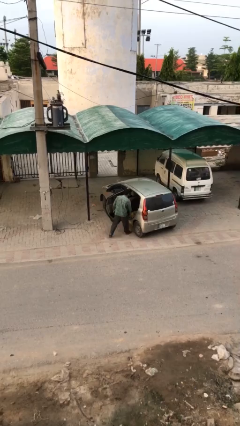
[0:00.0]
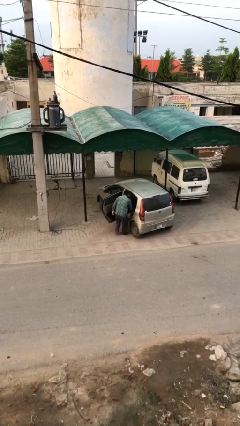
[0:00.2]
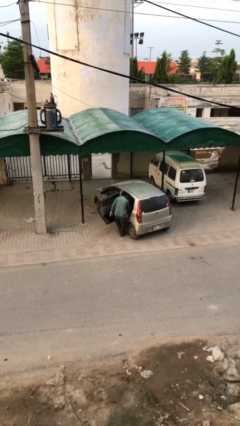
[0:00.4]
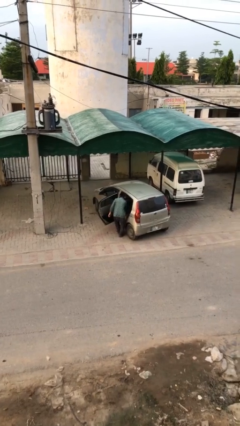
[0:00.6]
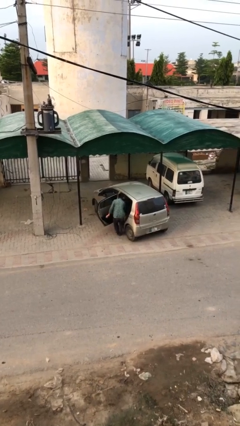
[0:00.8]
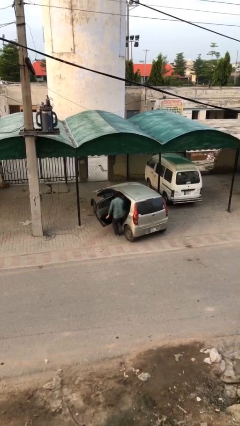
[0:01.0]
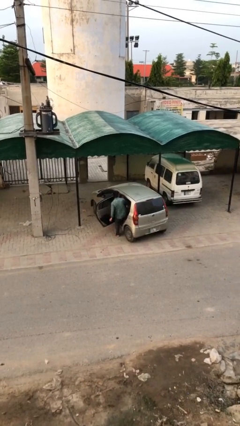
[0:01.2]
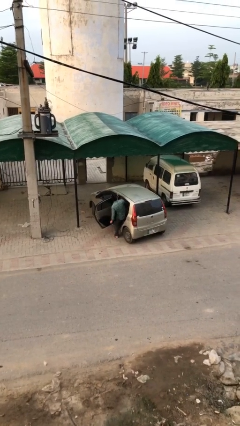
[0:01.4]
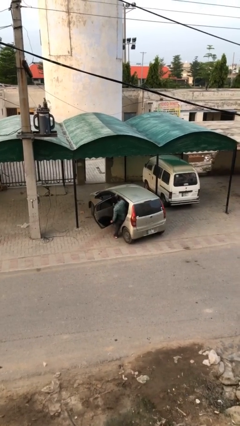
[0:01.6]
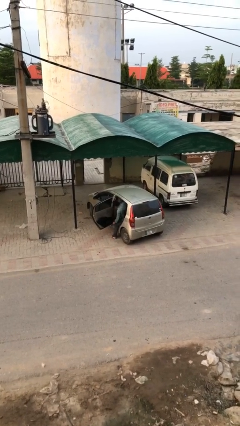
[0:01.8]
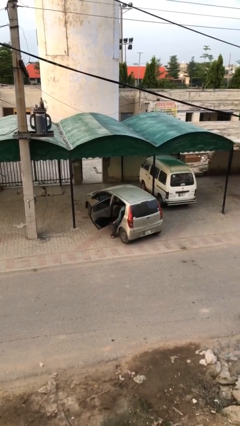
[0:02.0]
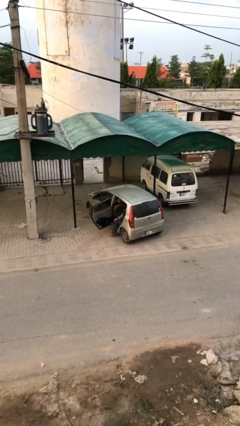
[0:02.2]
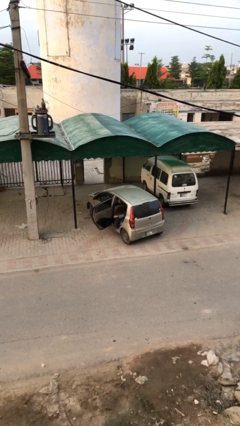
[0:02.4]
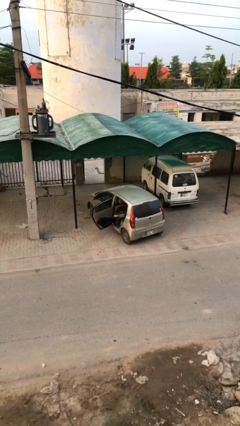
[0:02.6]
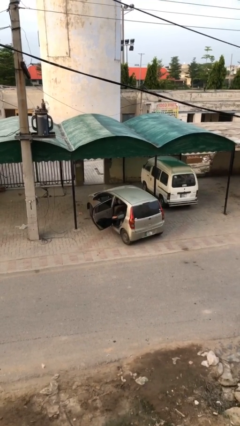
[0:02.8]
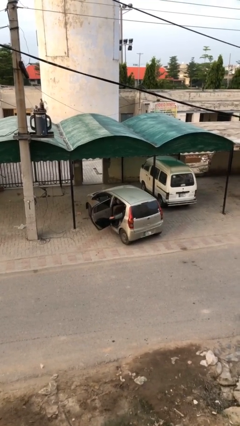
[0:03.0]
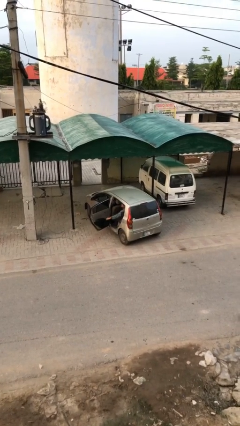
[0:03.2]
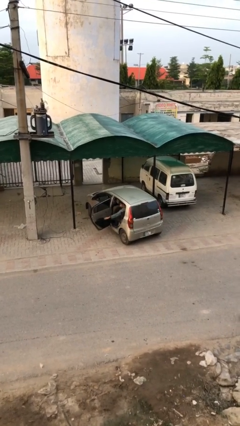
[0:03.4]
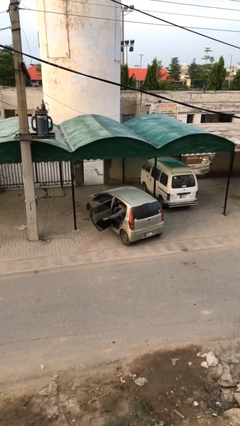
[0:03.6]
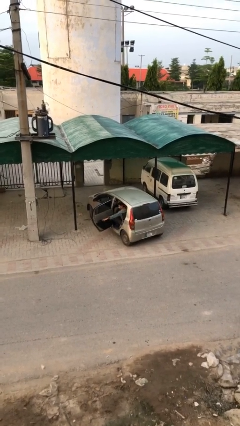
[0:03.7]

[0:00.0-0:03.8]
person enters car

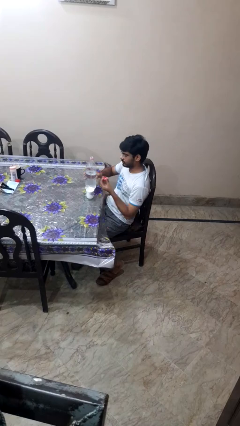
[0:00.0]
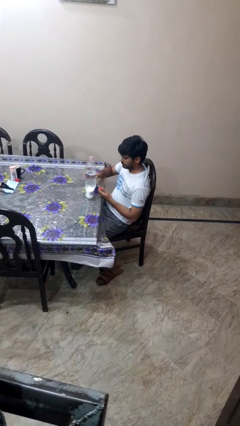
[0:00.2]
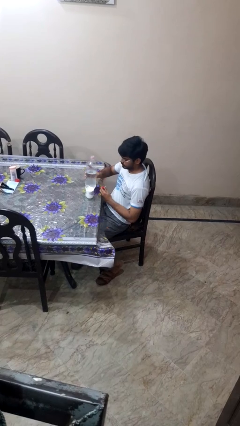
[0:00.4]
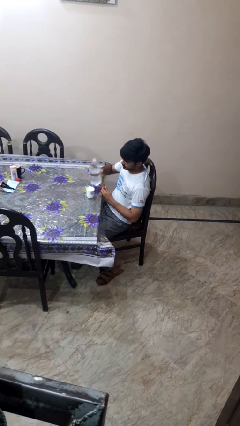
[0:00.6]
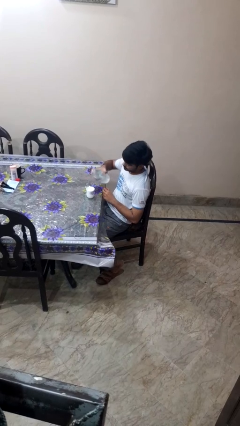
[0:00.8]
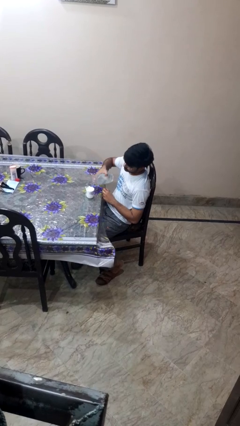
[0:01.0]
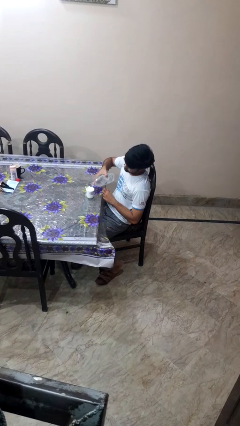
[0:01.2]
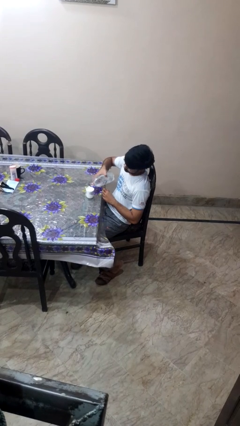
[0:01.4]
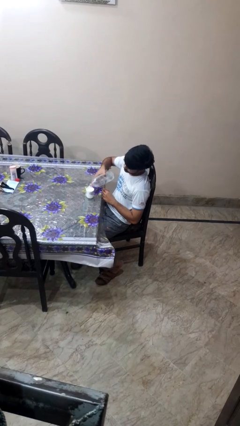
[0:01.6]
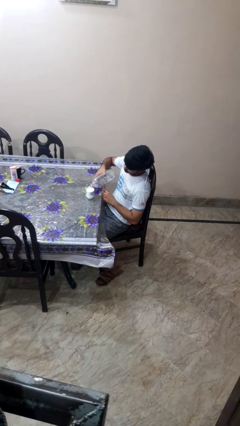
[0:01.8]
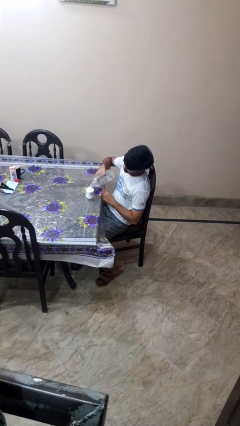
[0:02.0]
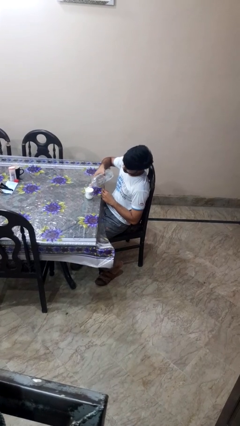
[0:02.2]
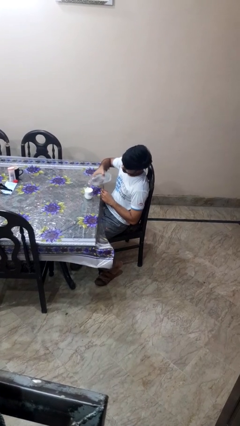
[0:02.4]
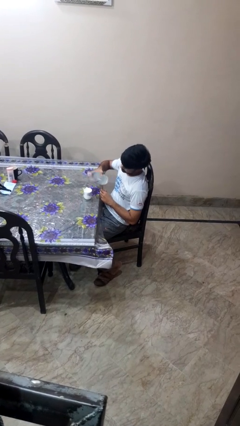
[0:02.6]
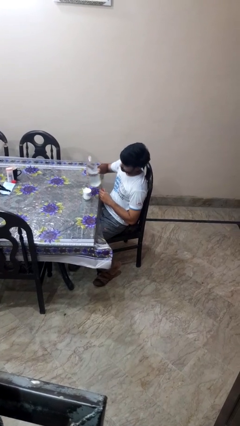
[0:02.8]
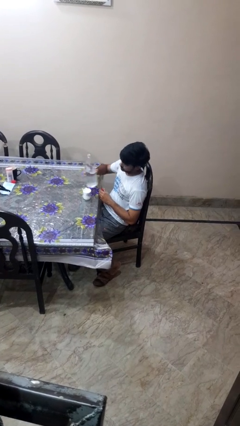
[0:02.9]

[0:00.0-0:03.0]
person pours liquid into cup

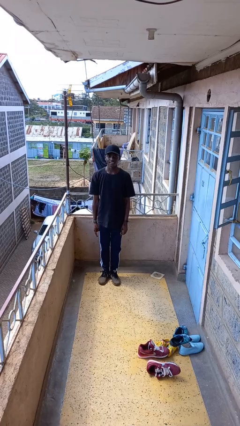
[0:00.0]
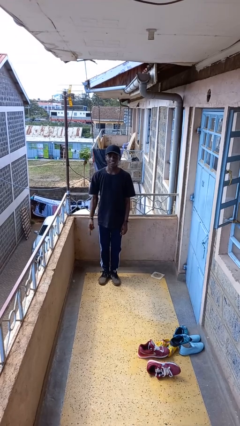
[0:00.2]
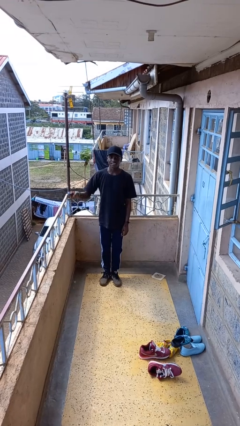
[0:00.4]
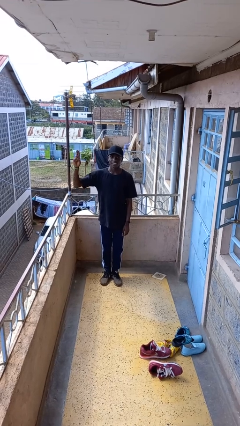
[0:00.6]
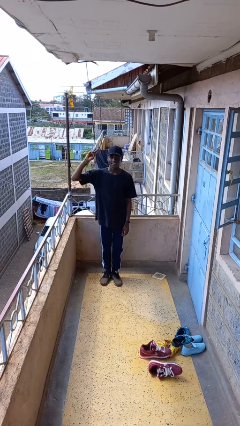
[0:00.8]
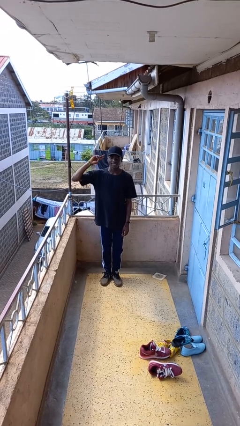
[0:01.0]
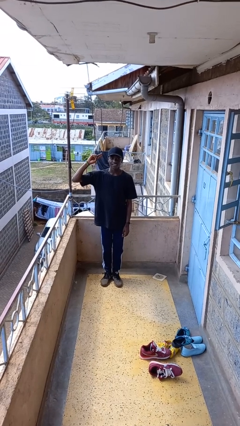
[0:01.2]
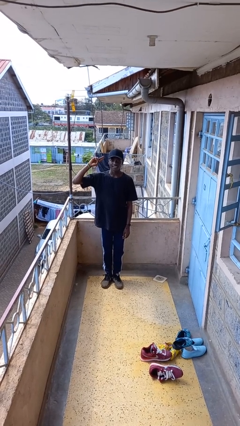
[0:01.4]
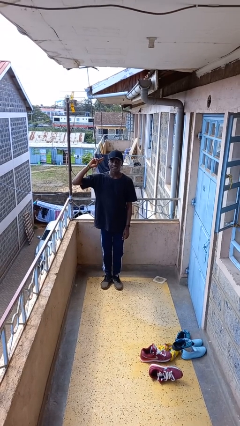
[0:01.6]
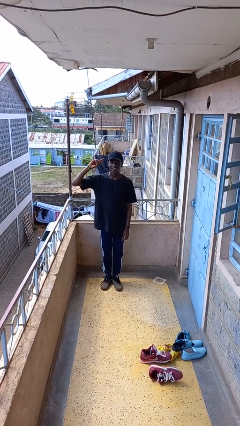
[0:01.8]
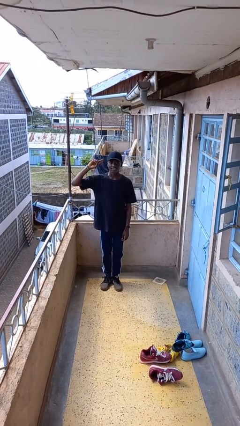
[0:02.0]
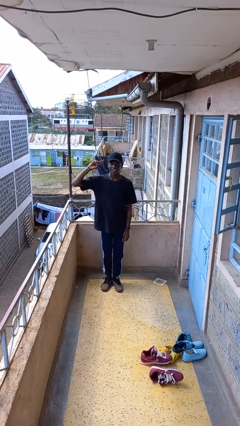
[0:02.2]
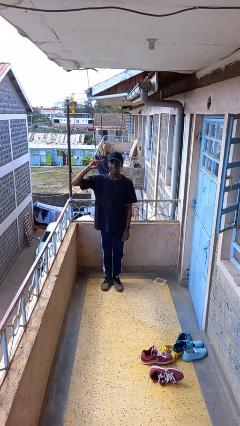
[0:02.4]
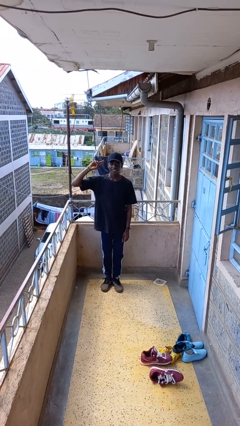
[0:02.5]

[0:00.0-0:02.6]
person salutes

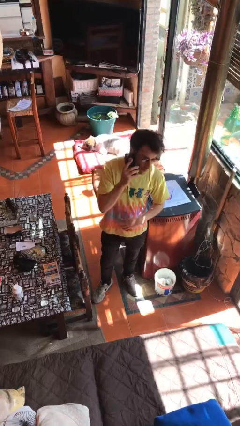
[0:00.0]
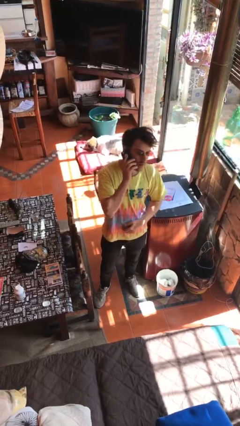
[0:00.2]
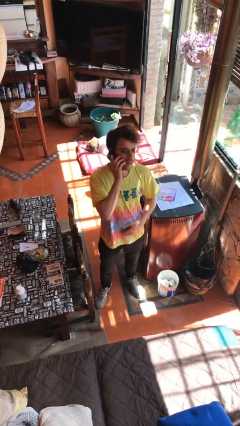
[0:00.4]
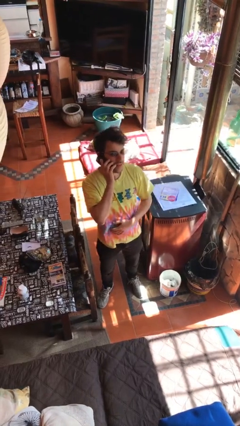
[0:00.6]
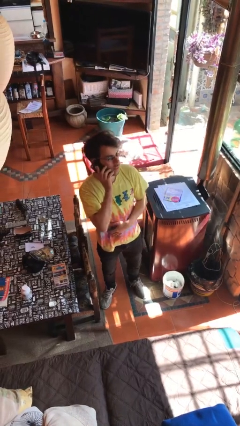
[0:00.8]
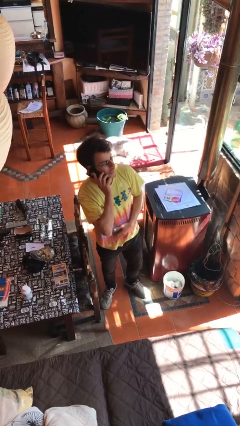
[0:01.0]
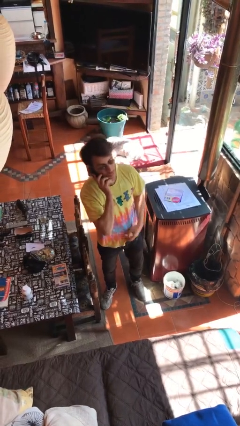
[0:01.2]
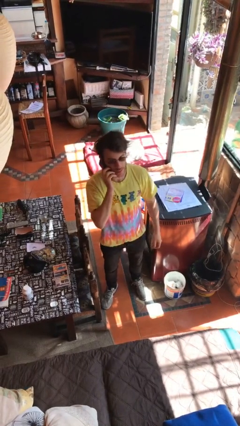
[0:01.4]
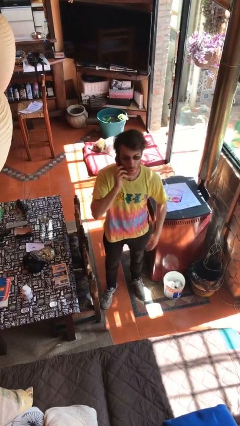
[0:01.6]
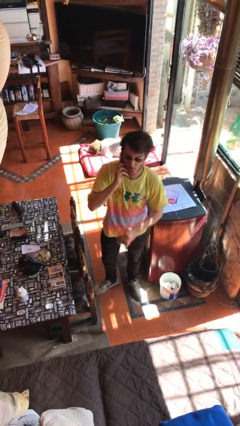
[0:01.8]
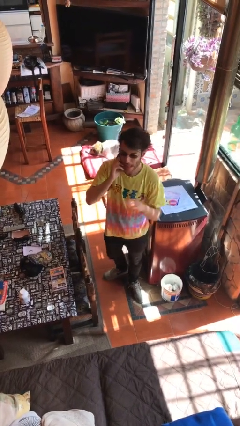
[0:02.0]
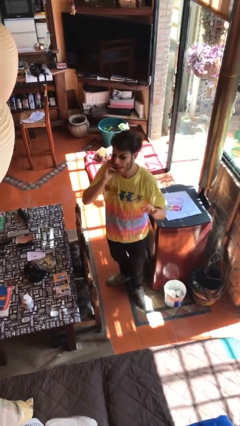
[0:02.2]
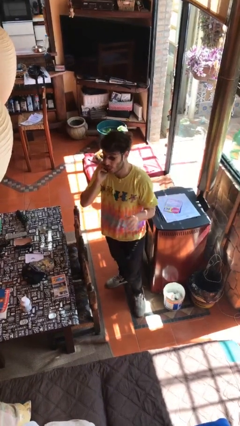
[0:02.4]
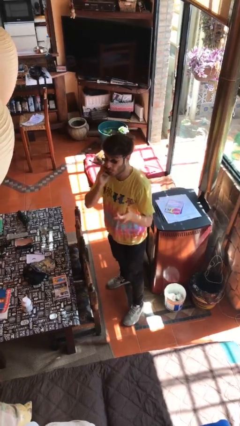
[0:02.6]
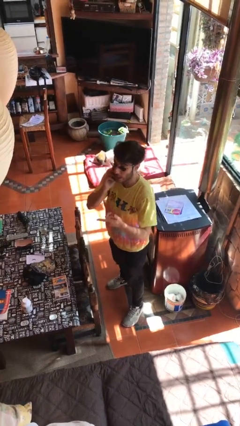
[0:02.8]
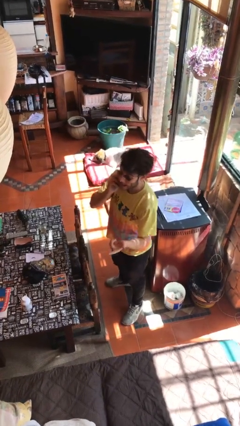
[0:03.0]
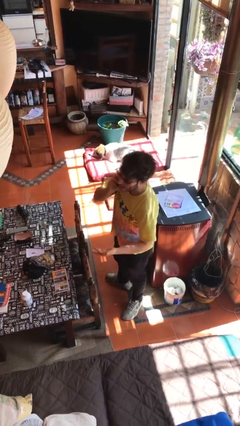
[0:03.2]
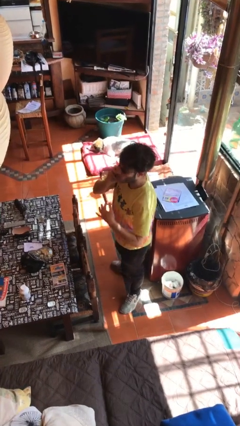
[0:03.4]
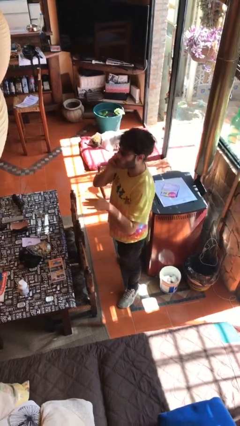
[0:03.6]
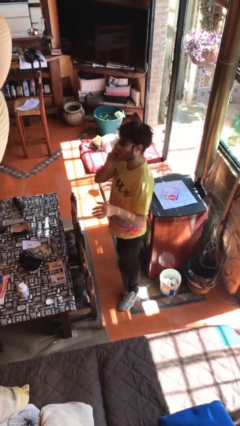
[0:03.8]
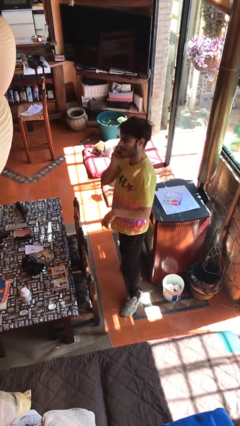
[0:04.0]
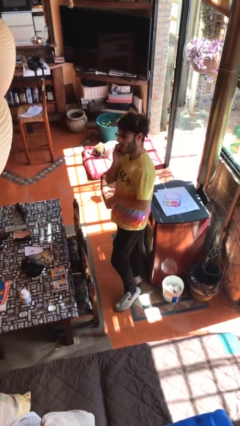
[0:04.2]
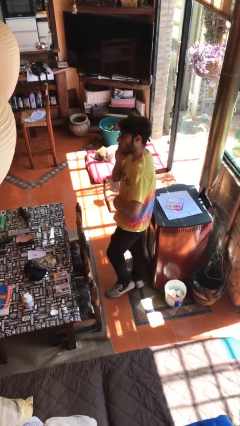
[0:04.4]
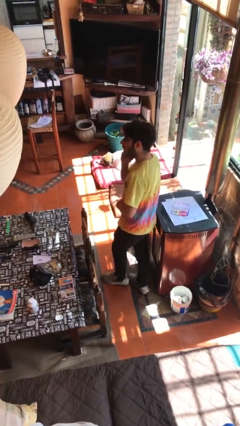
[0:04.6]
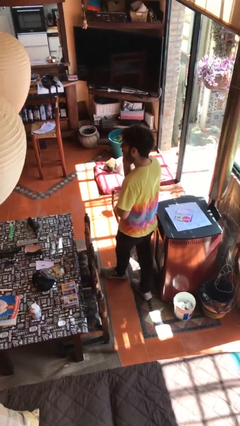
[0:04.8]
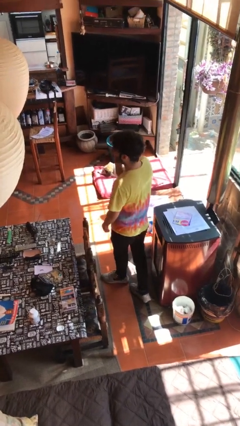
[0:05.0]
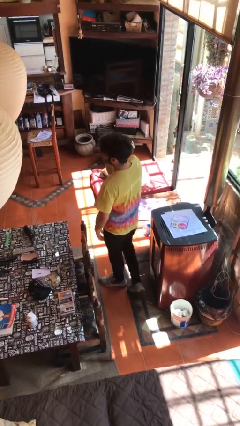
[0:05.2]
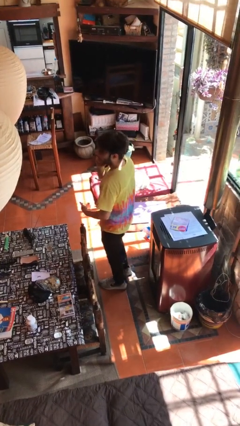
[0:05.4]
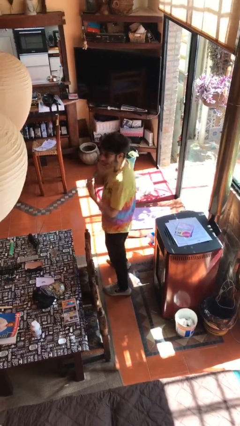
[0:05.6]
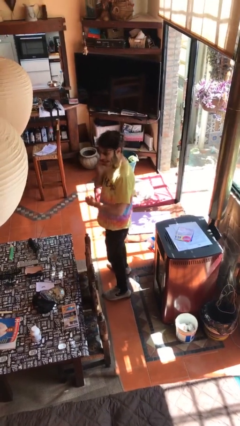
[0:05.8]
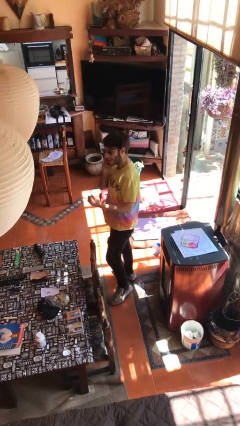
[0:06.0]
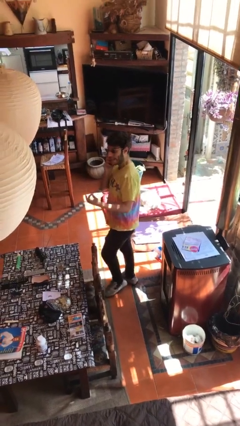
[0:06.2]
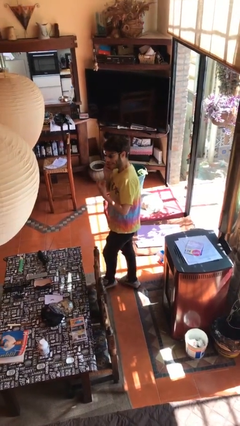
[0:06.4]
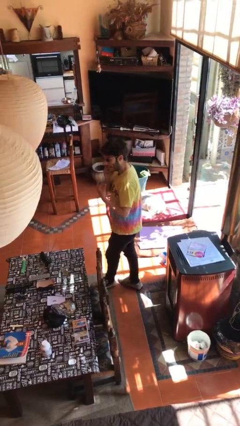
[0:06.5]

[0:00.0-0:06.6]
person talks on phone

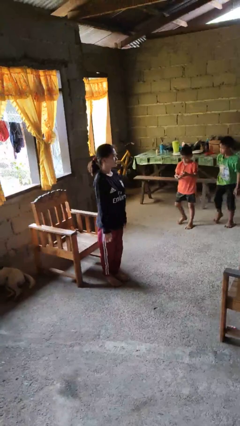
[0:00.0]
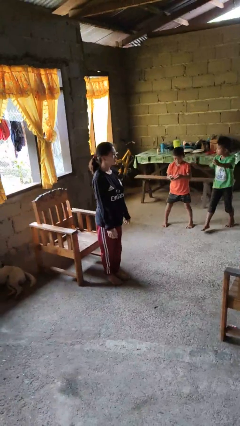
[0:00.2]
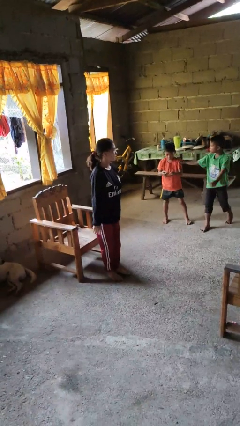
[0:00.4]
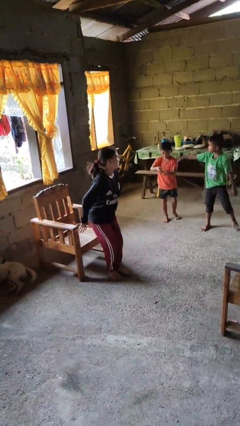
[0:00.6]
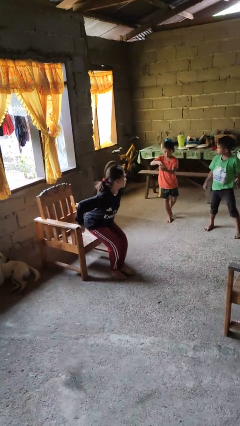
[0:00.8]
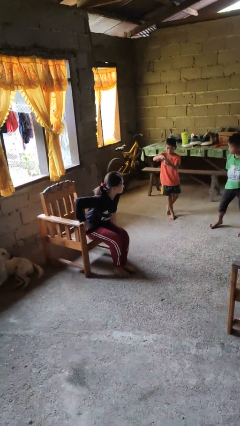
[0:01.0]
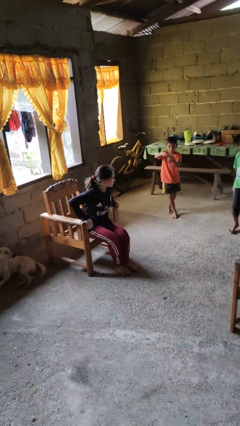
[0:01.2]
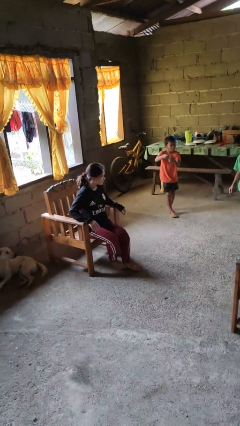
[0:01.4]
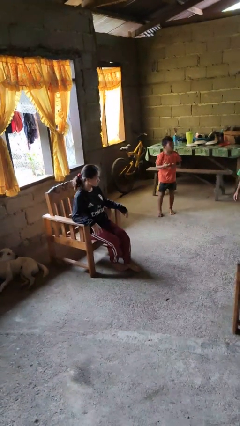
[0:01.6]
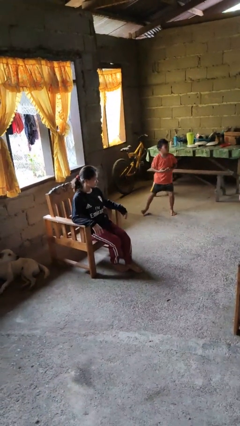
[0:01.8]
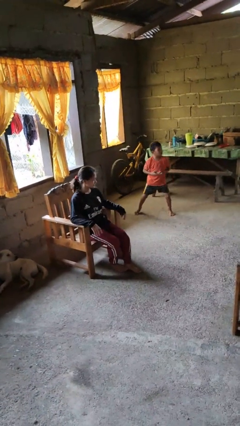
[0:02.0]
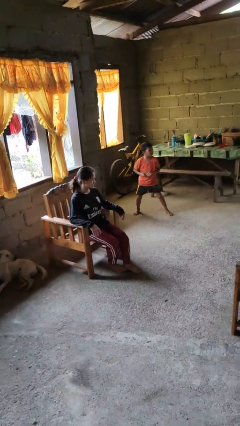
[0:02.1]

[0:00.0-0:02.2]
person sits down
